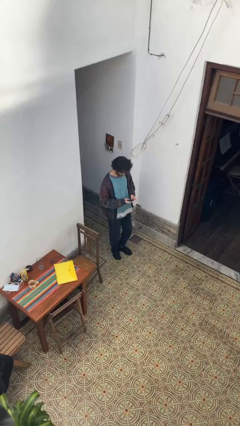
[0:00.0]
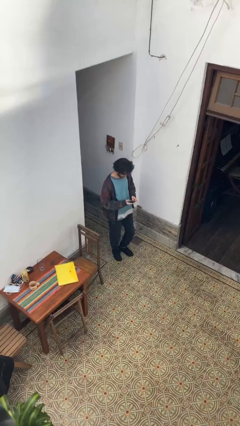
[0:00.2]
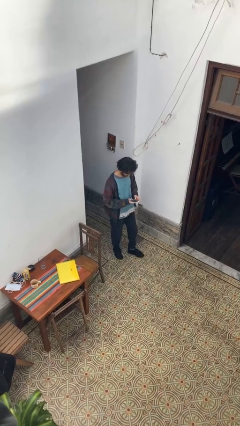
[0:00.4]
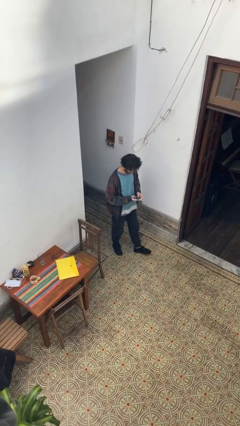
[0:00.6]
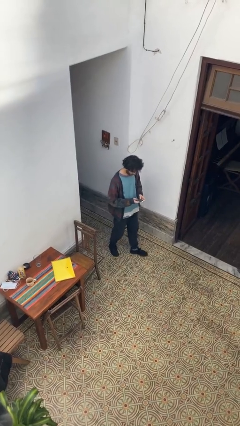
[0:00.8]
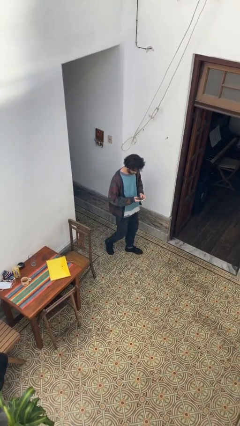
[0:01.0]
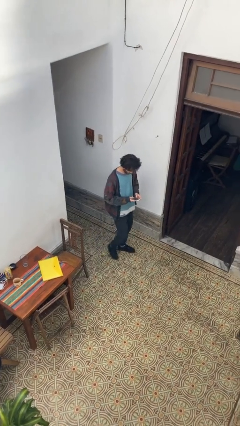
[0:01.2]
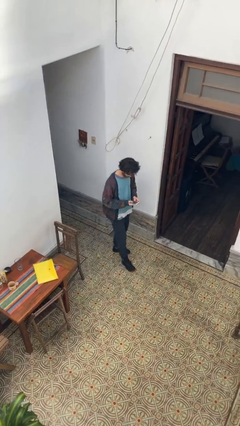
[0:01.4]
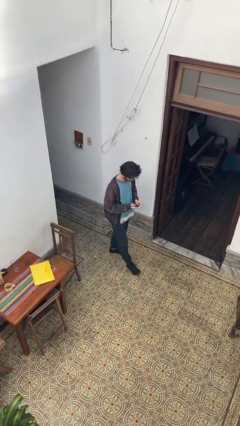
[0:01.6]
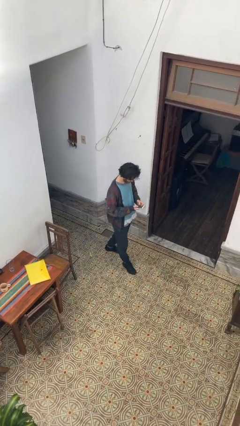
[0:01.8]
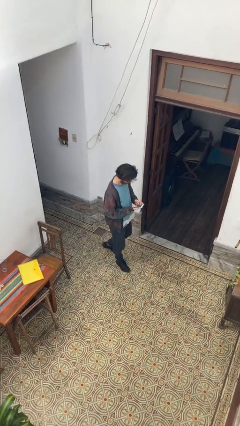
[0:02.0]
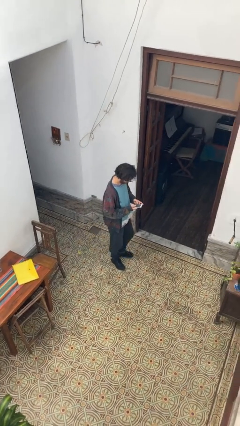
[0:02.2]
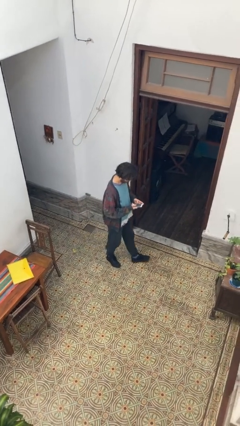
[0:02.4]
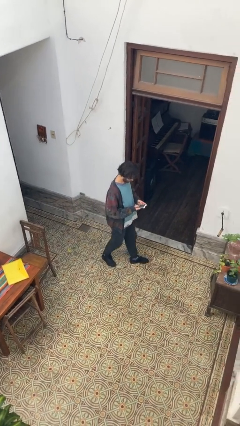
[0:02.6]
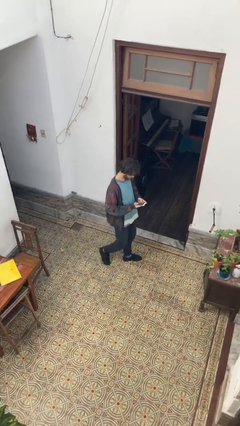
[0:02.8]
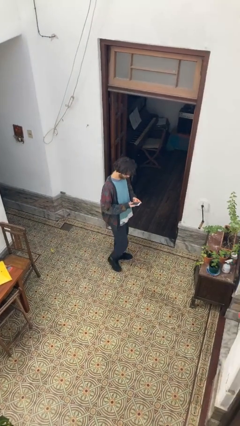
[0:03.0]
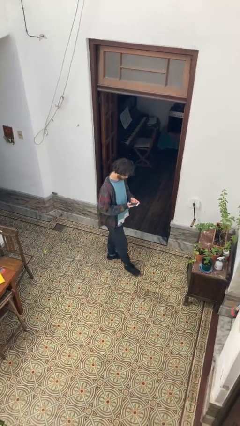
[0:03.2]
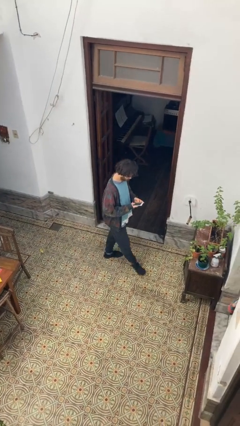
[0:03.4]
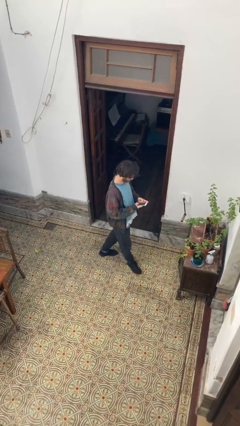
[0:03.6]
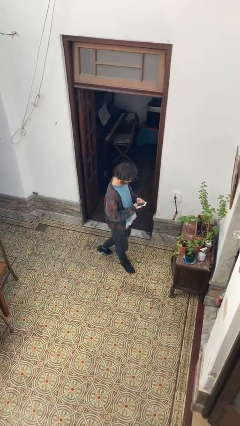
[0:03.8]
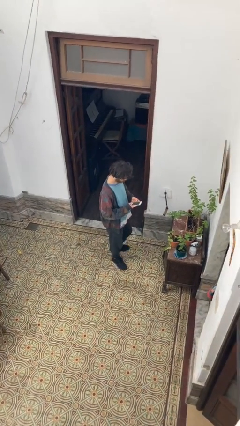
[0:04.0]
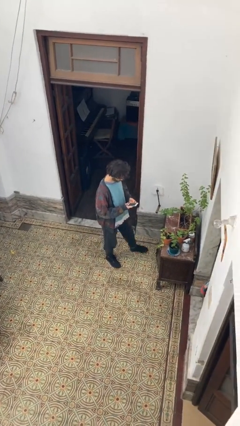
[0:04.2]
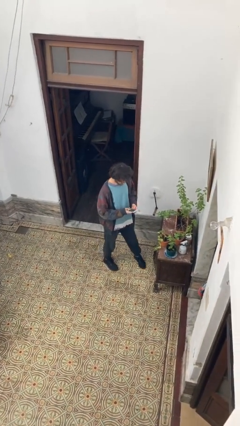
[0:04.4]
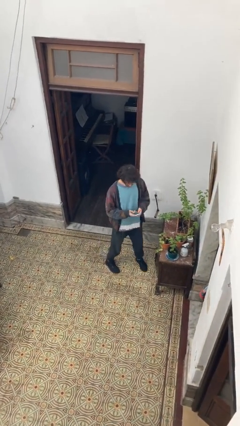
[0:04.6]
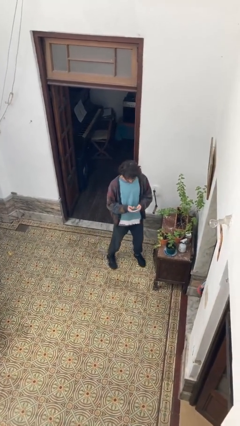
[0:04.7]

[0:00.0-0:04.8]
person texts on phone

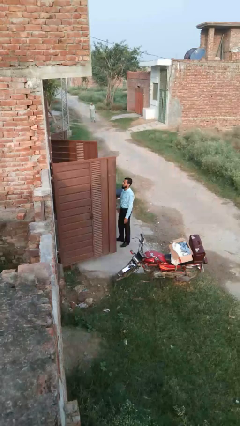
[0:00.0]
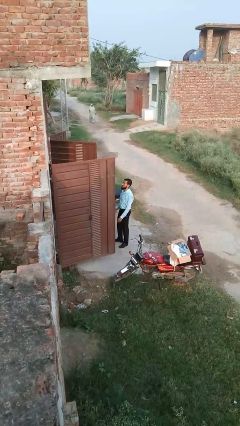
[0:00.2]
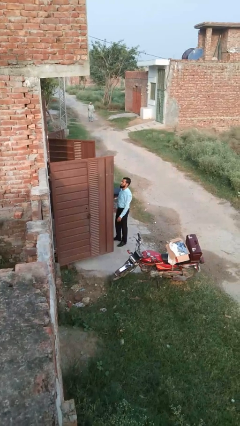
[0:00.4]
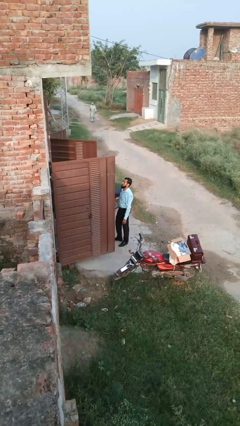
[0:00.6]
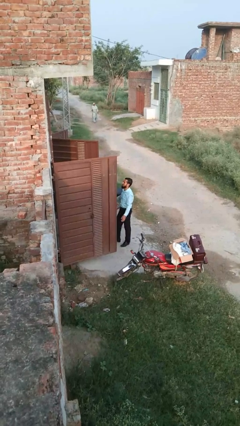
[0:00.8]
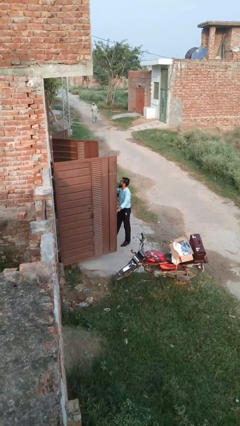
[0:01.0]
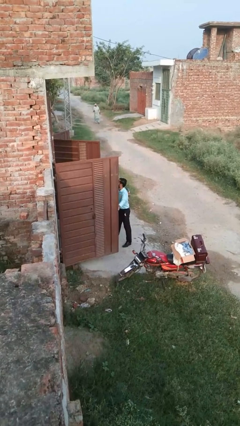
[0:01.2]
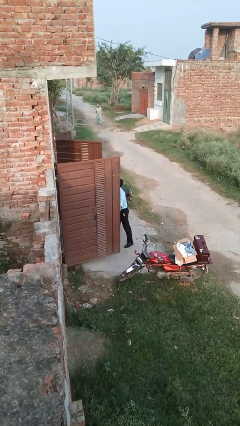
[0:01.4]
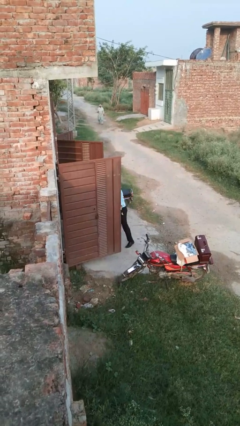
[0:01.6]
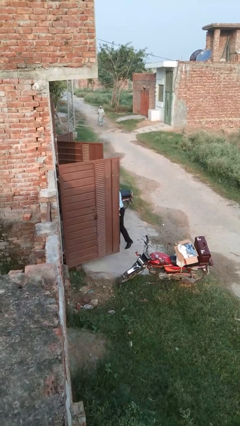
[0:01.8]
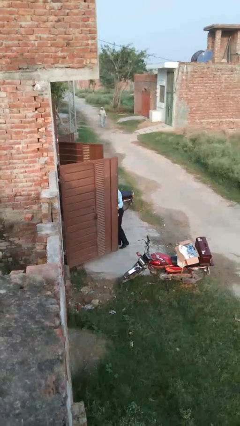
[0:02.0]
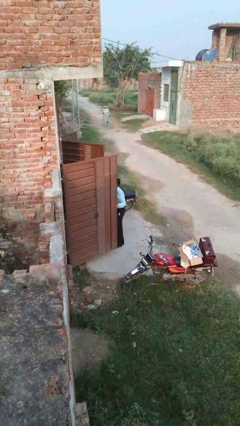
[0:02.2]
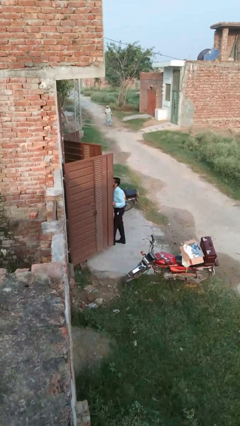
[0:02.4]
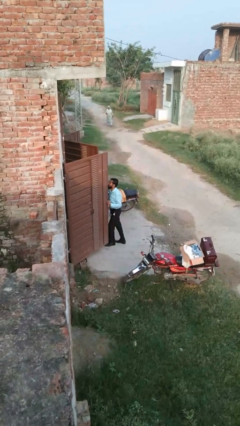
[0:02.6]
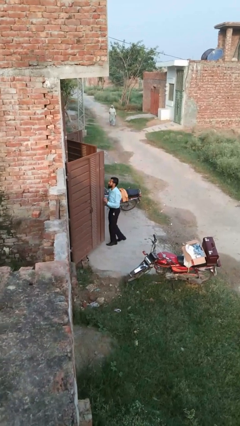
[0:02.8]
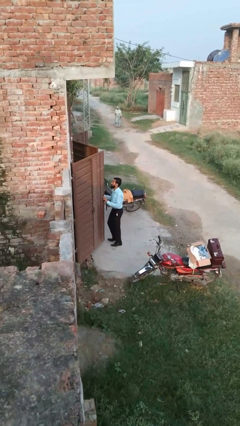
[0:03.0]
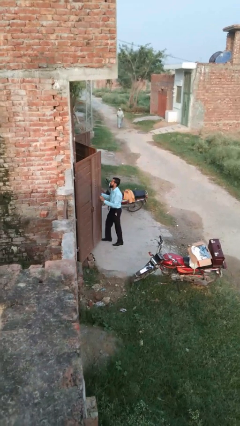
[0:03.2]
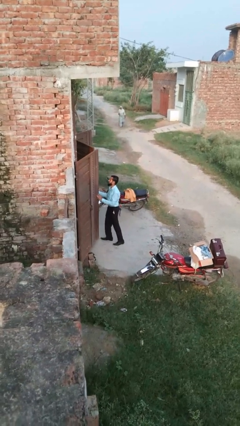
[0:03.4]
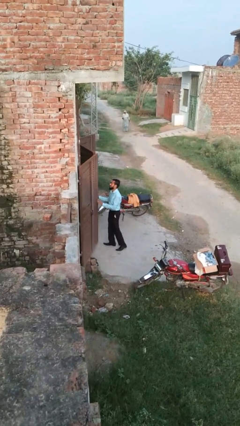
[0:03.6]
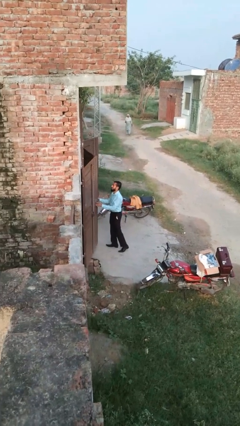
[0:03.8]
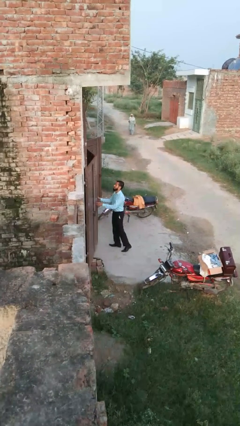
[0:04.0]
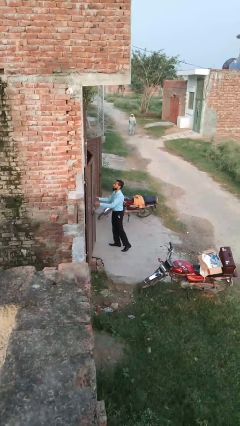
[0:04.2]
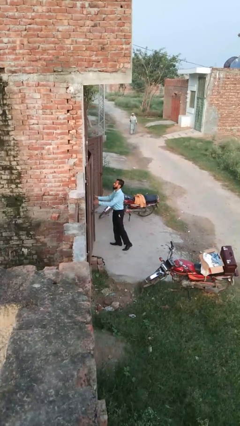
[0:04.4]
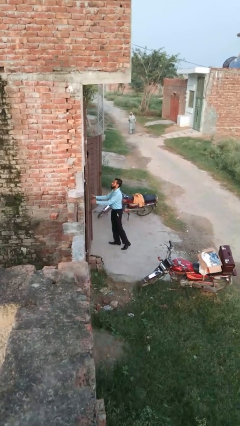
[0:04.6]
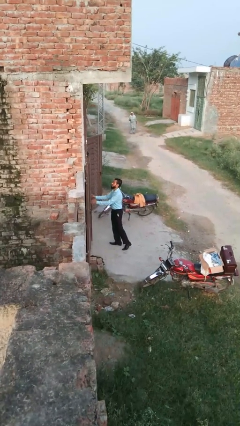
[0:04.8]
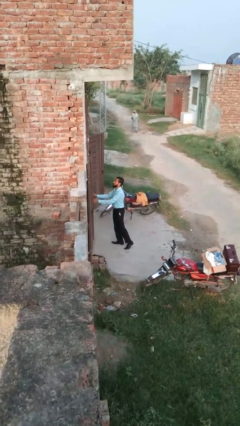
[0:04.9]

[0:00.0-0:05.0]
person closes gate

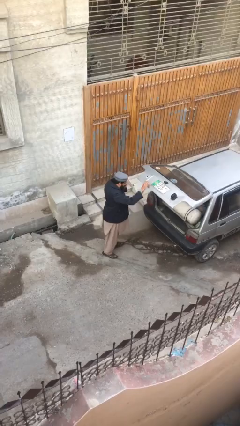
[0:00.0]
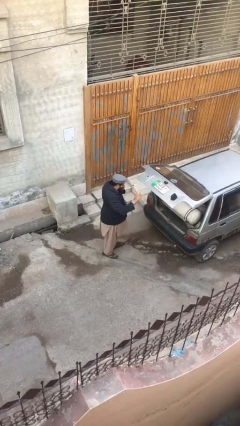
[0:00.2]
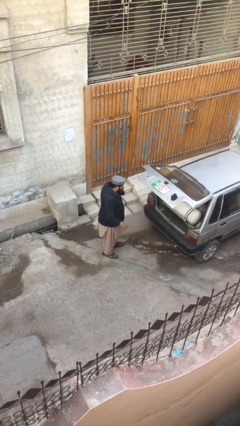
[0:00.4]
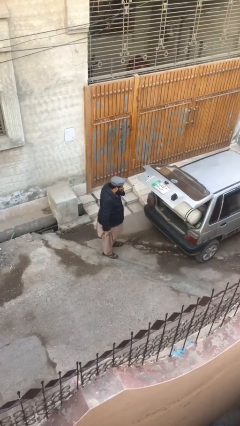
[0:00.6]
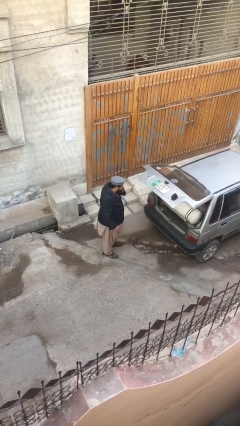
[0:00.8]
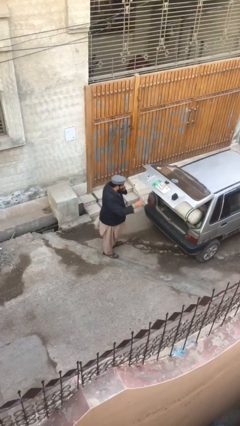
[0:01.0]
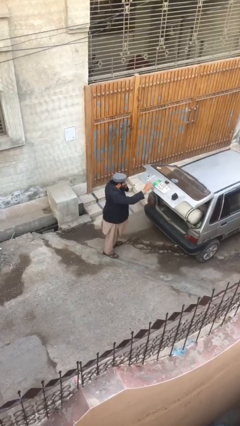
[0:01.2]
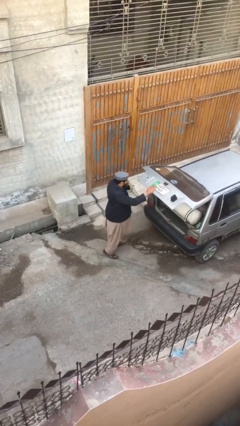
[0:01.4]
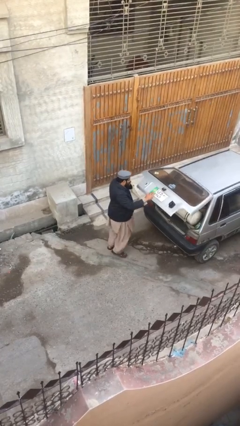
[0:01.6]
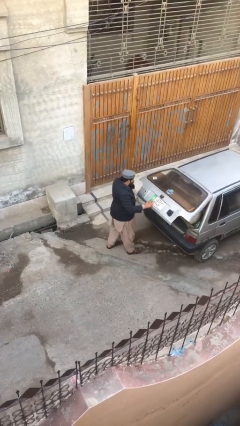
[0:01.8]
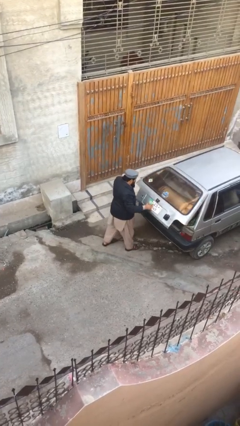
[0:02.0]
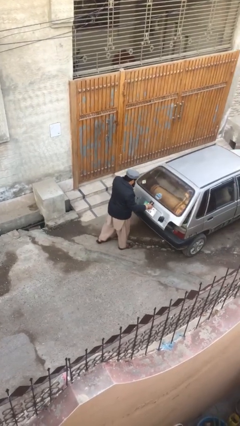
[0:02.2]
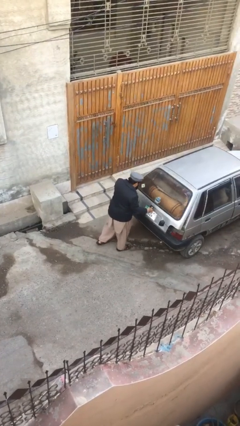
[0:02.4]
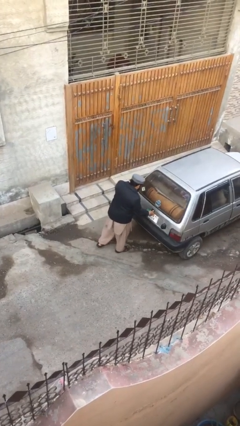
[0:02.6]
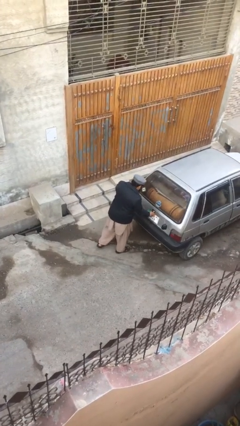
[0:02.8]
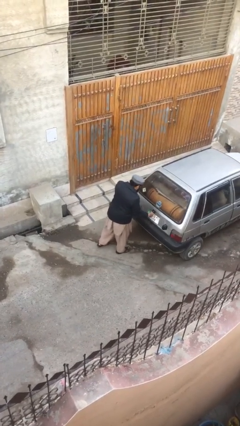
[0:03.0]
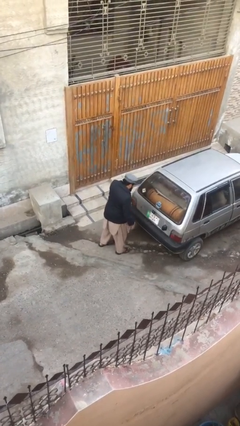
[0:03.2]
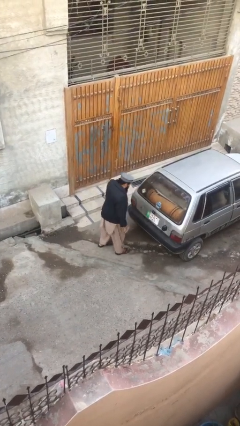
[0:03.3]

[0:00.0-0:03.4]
person closes car trunk

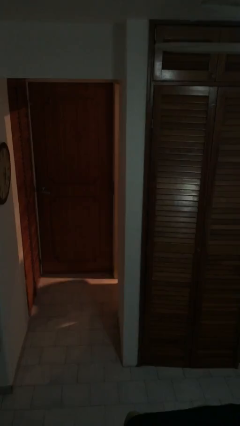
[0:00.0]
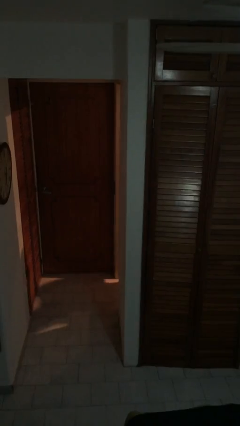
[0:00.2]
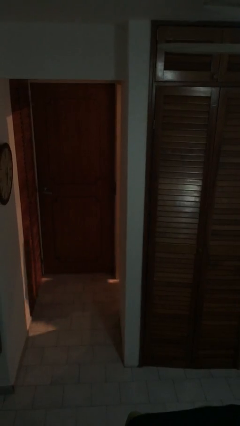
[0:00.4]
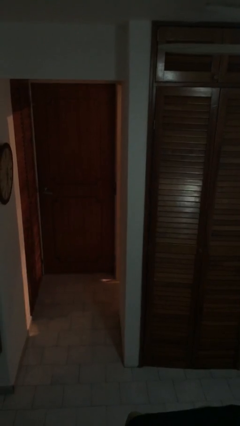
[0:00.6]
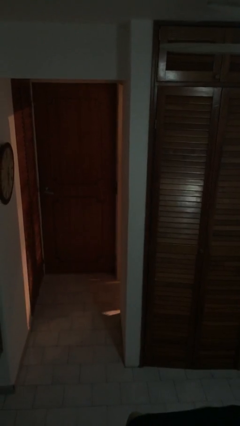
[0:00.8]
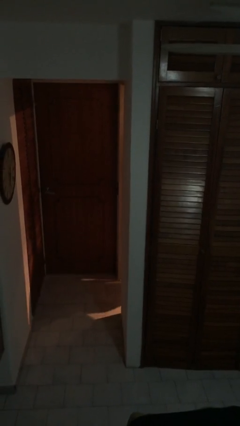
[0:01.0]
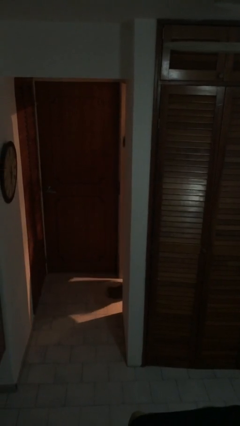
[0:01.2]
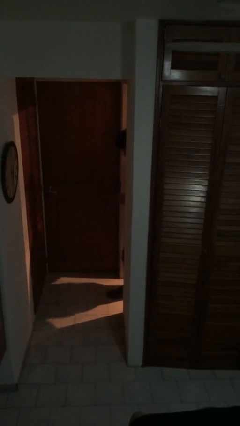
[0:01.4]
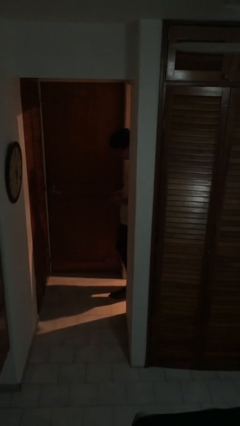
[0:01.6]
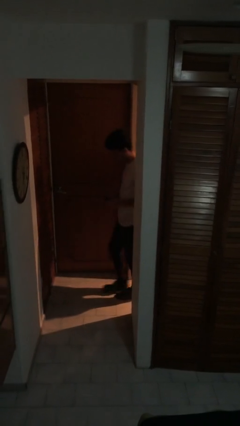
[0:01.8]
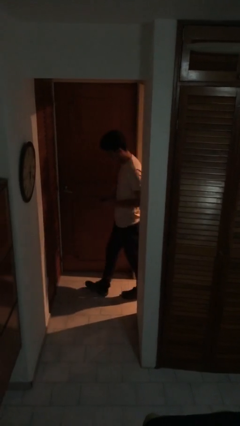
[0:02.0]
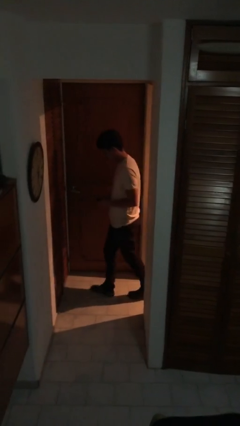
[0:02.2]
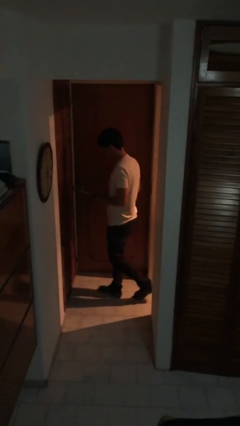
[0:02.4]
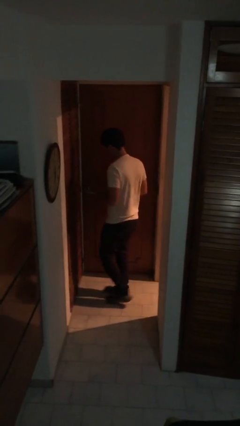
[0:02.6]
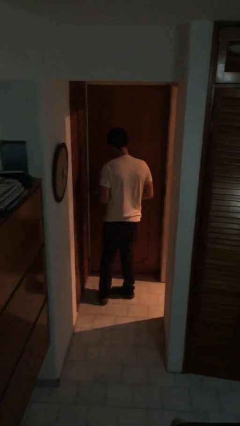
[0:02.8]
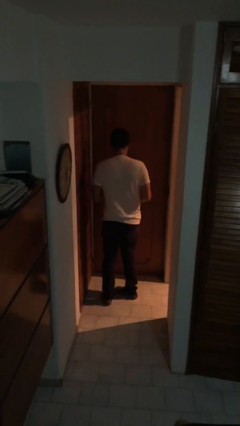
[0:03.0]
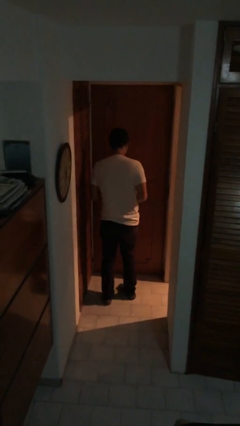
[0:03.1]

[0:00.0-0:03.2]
person enters scene through structure

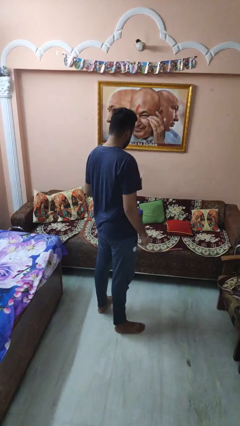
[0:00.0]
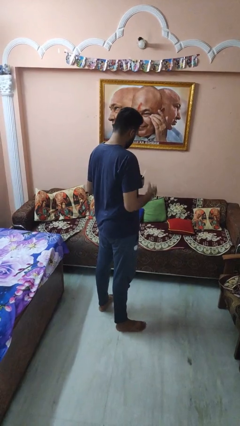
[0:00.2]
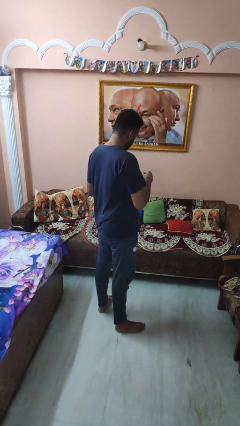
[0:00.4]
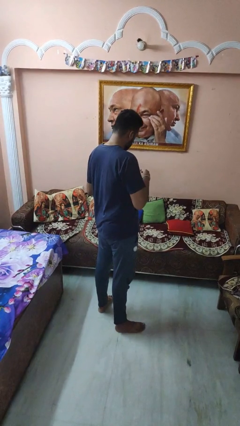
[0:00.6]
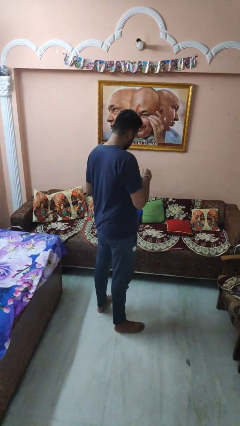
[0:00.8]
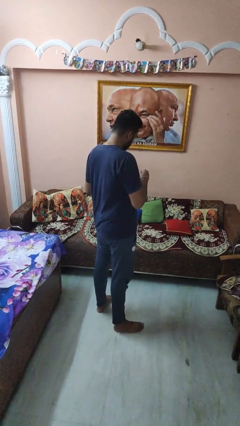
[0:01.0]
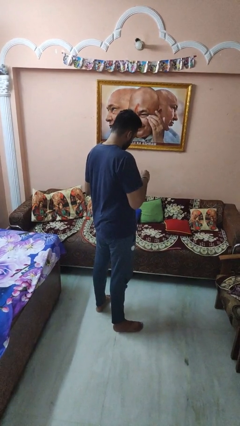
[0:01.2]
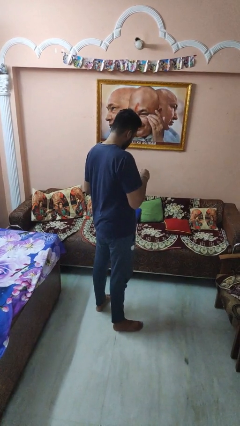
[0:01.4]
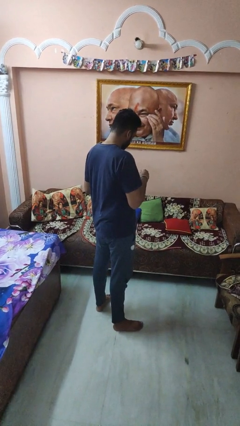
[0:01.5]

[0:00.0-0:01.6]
person stirs mug
